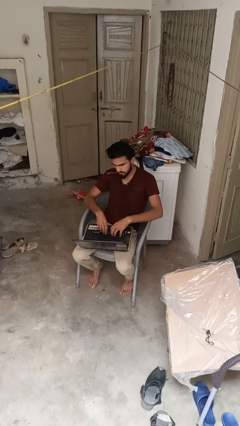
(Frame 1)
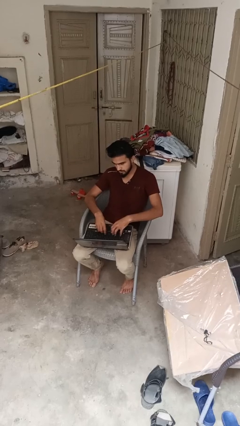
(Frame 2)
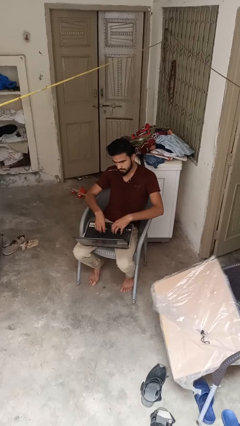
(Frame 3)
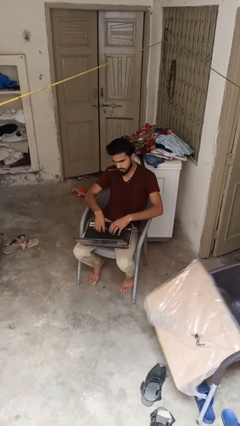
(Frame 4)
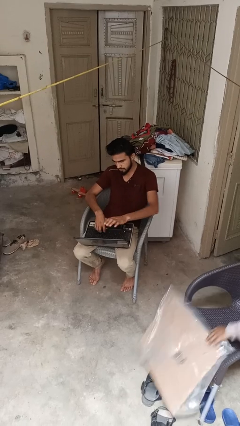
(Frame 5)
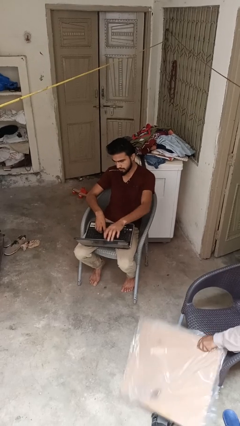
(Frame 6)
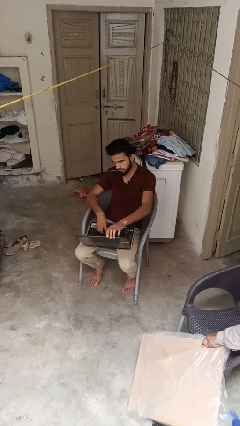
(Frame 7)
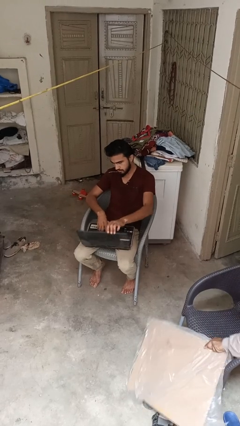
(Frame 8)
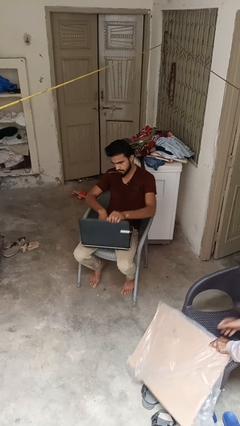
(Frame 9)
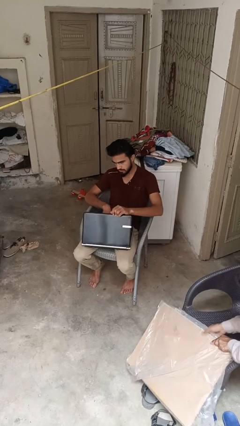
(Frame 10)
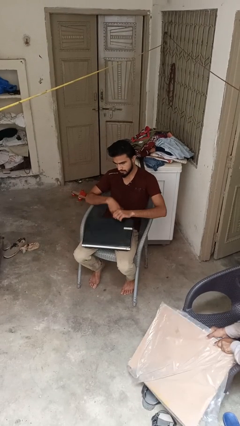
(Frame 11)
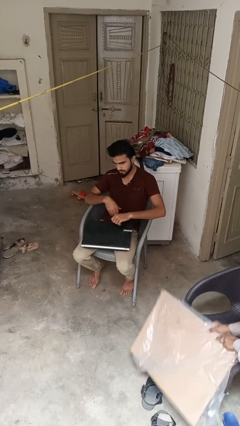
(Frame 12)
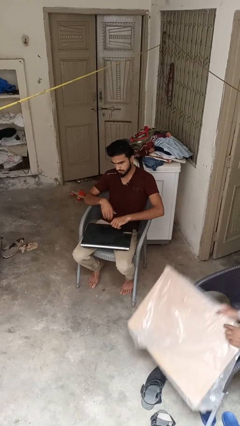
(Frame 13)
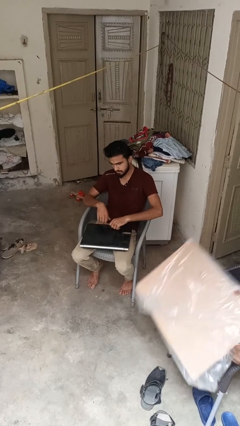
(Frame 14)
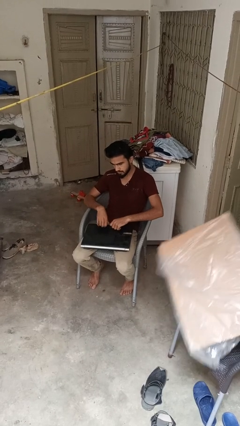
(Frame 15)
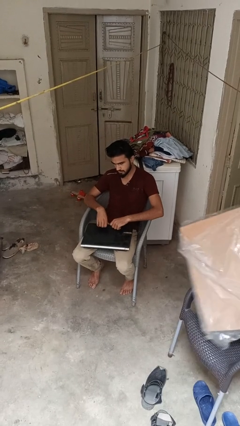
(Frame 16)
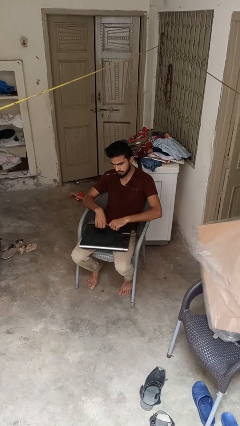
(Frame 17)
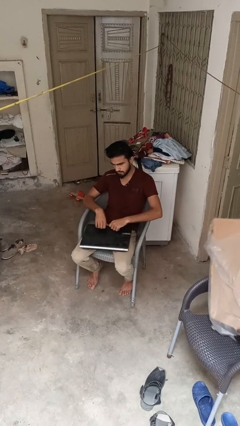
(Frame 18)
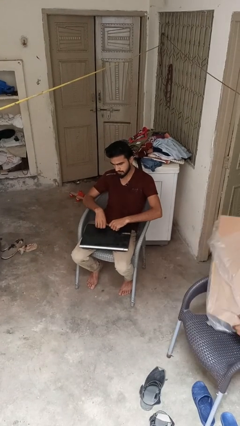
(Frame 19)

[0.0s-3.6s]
person closes laptop

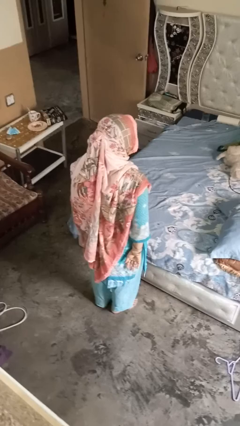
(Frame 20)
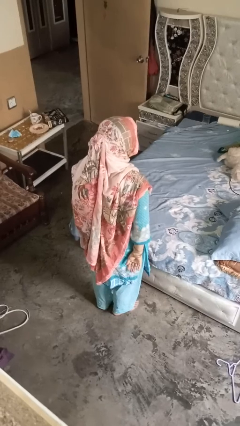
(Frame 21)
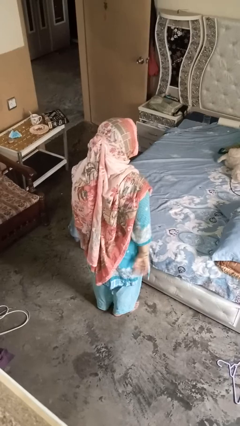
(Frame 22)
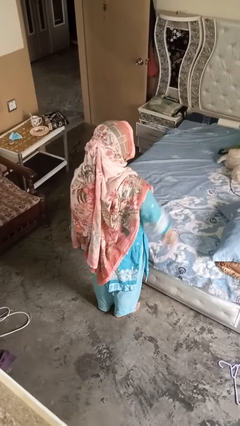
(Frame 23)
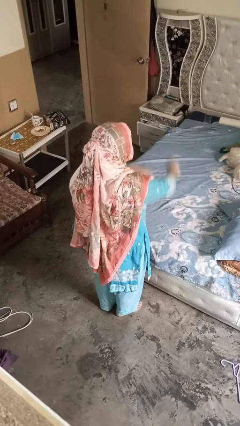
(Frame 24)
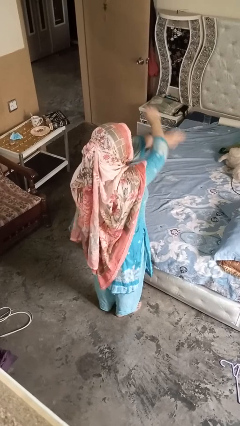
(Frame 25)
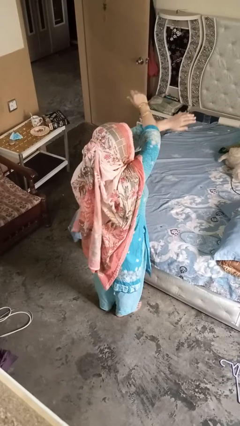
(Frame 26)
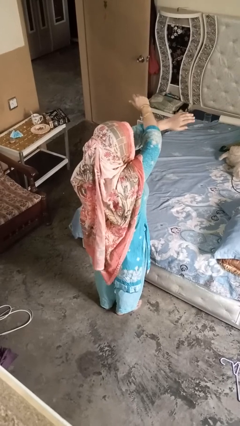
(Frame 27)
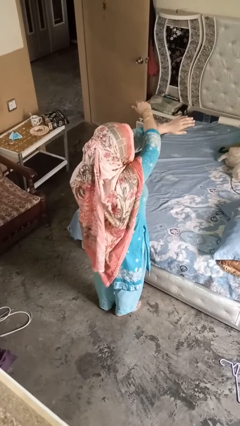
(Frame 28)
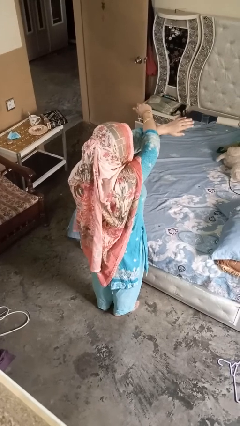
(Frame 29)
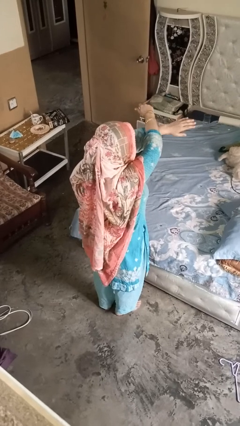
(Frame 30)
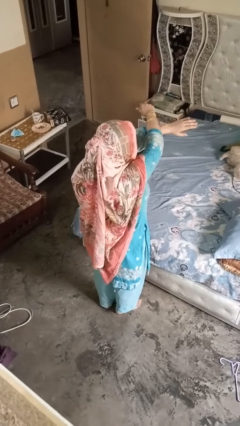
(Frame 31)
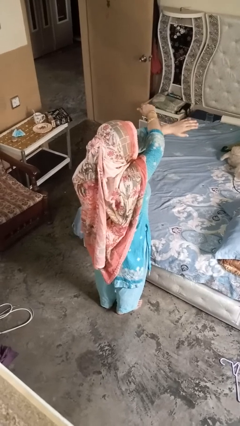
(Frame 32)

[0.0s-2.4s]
person gestures arms x

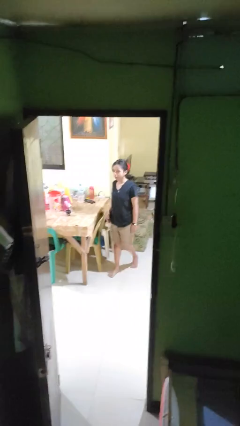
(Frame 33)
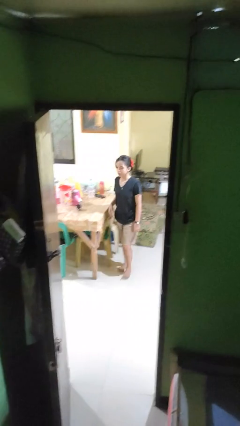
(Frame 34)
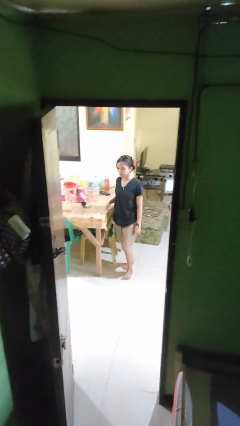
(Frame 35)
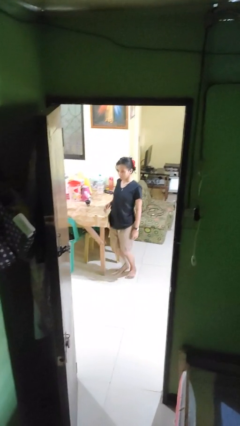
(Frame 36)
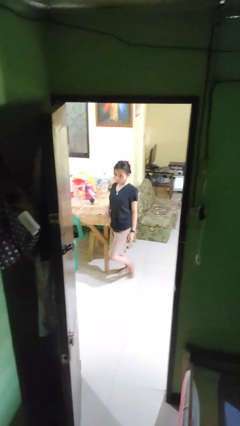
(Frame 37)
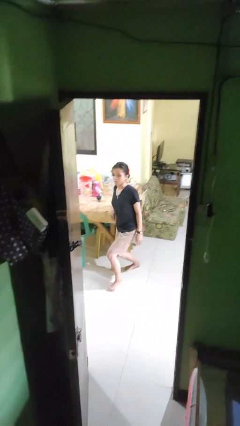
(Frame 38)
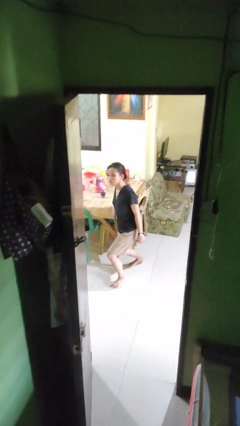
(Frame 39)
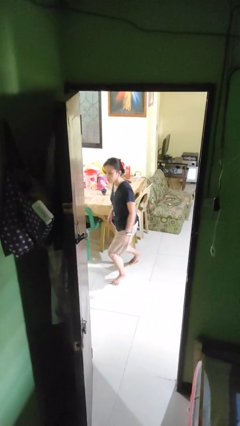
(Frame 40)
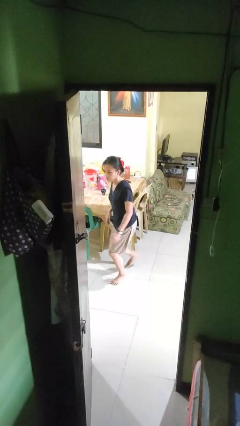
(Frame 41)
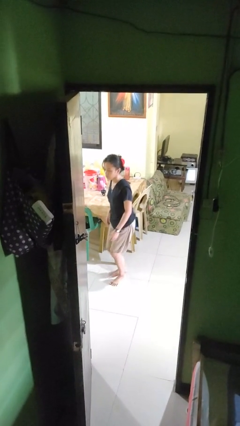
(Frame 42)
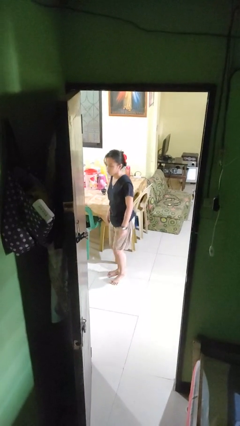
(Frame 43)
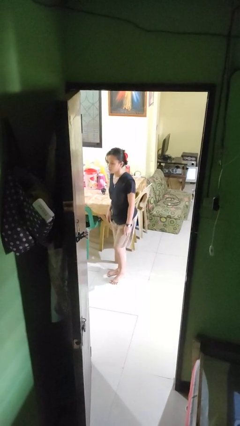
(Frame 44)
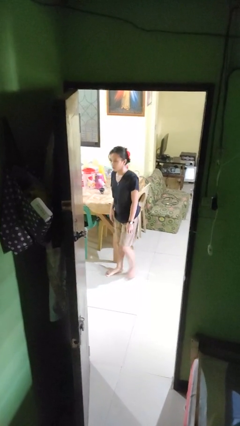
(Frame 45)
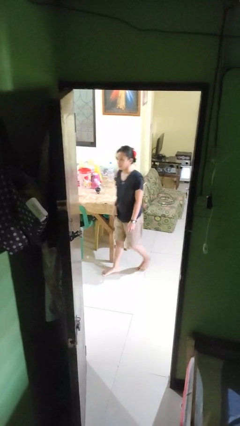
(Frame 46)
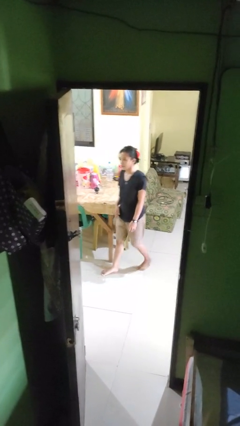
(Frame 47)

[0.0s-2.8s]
person bumps into table

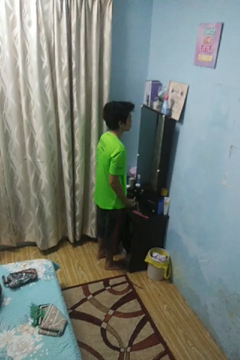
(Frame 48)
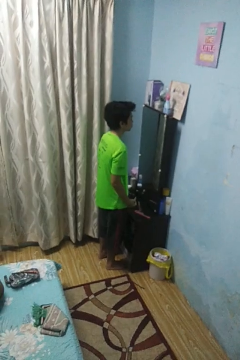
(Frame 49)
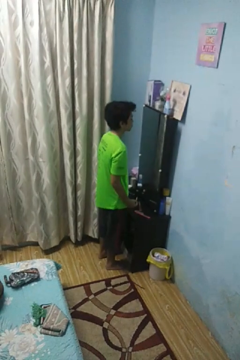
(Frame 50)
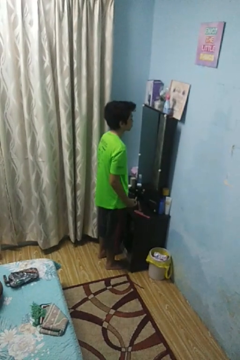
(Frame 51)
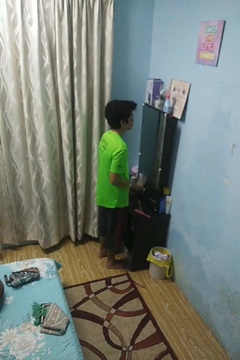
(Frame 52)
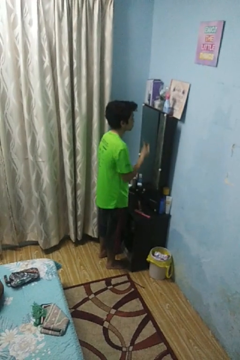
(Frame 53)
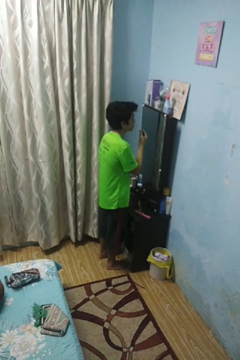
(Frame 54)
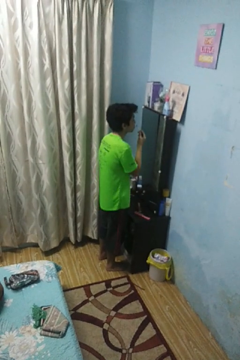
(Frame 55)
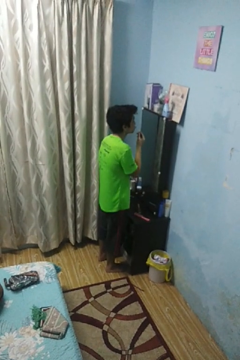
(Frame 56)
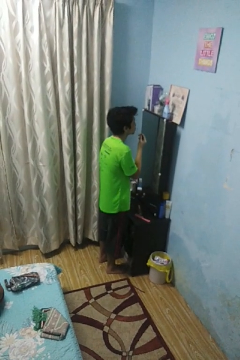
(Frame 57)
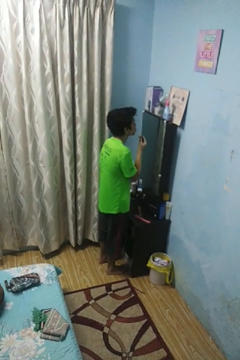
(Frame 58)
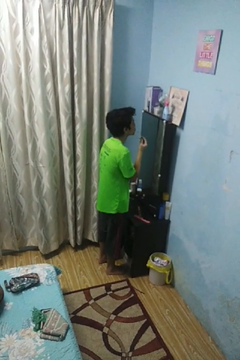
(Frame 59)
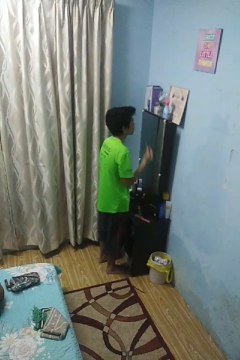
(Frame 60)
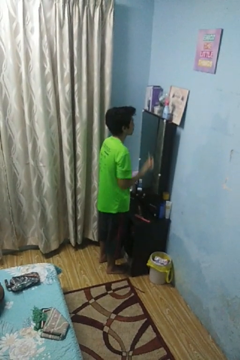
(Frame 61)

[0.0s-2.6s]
person applies lip makeup

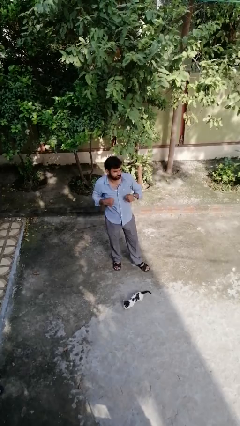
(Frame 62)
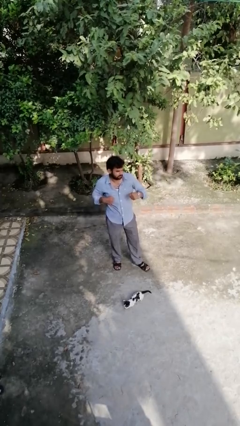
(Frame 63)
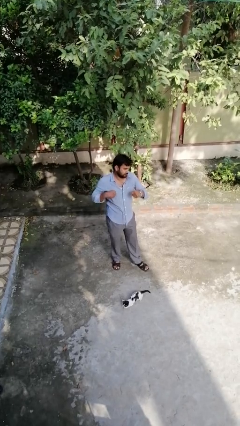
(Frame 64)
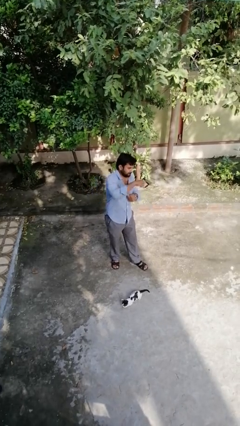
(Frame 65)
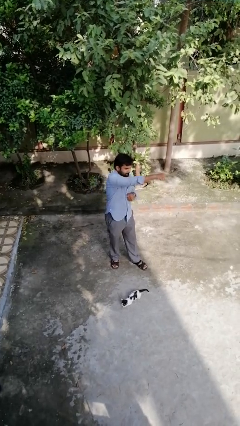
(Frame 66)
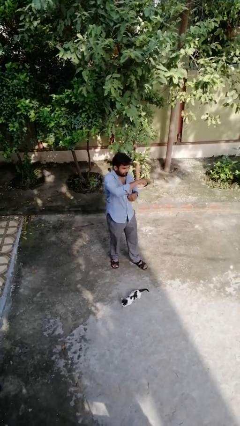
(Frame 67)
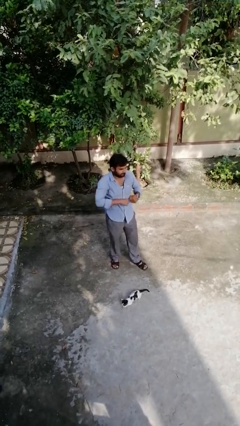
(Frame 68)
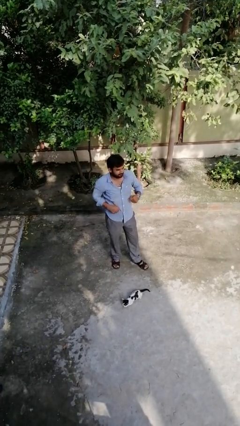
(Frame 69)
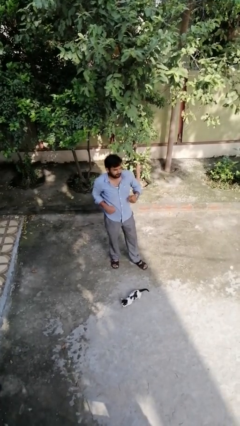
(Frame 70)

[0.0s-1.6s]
person punches

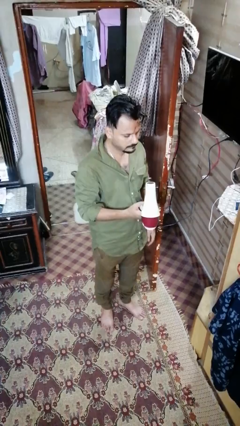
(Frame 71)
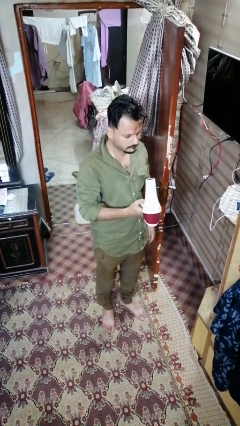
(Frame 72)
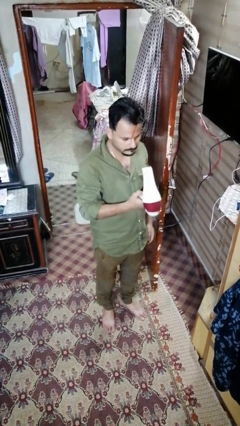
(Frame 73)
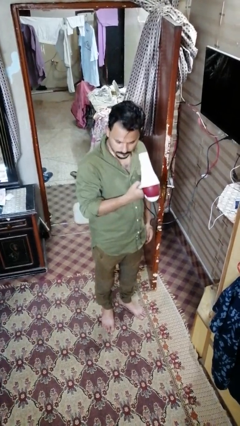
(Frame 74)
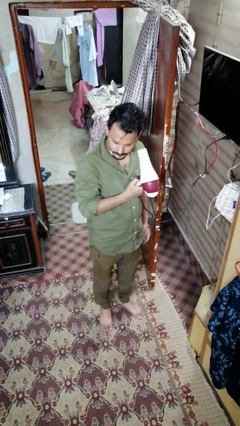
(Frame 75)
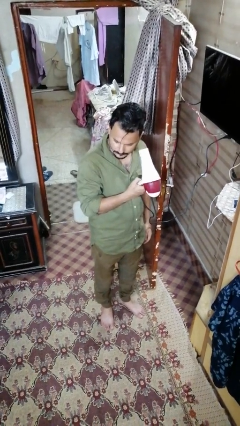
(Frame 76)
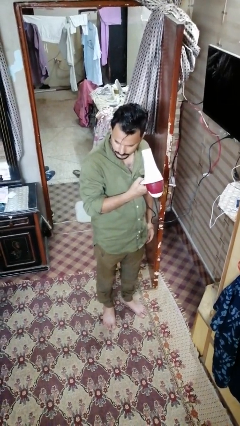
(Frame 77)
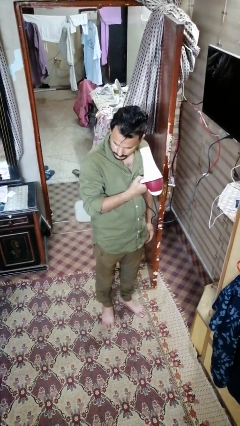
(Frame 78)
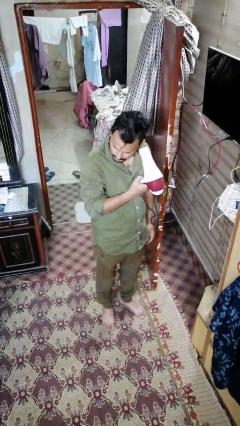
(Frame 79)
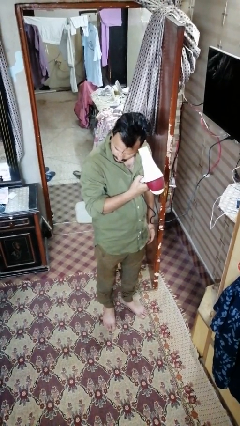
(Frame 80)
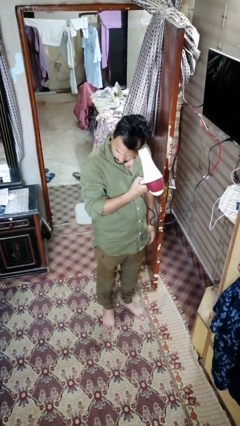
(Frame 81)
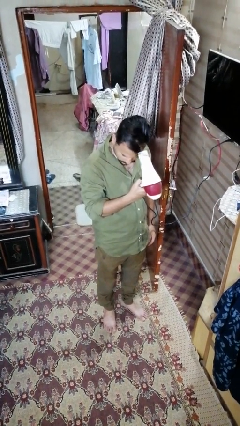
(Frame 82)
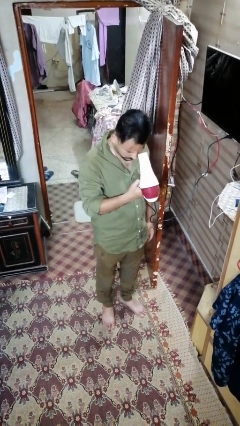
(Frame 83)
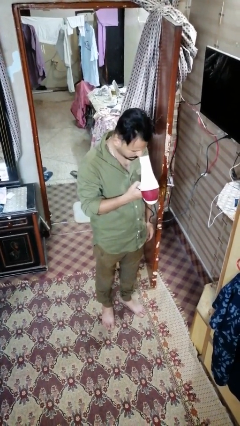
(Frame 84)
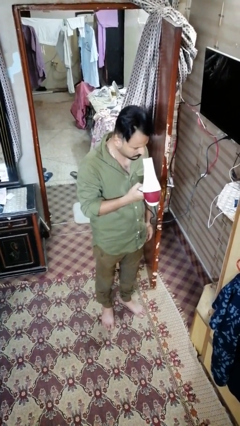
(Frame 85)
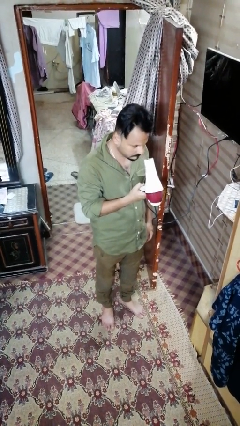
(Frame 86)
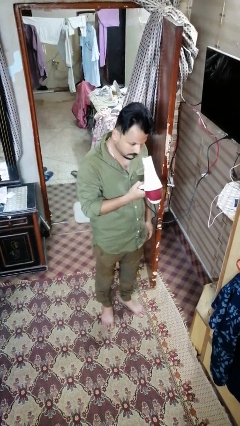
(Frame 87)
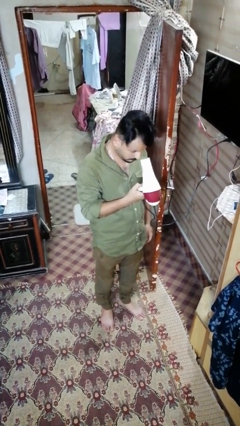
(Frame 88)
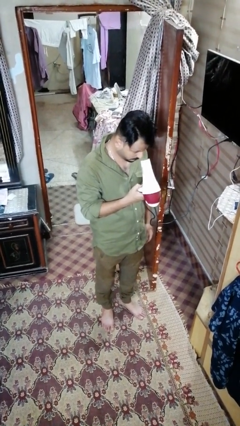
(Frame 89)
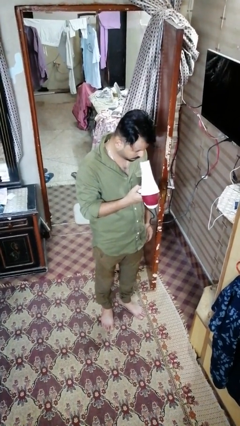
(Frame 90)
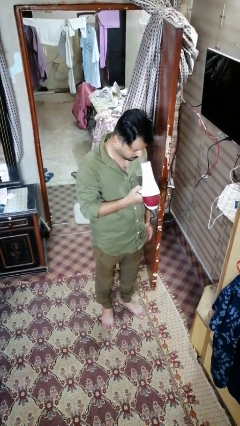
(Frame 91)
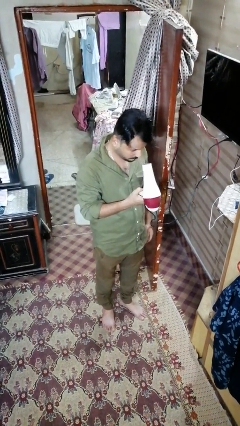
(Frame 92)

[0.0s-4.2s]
person dries hair with hairdryer
